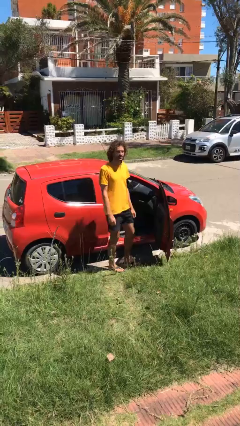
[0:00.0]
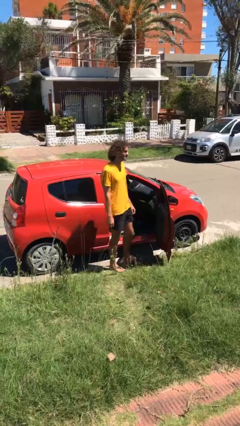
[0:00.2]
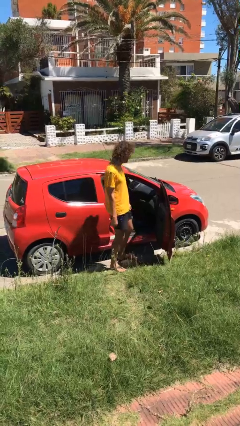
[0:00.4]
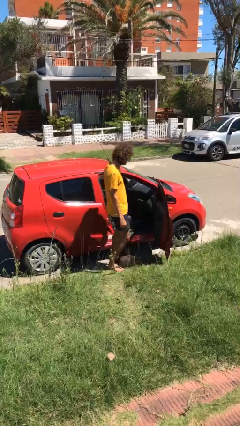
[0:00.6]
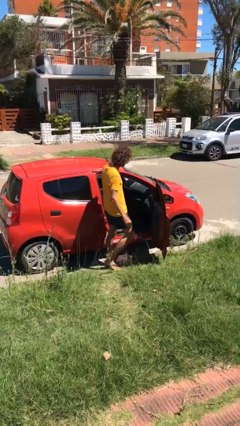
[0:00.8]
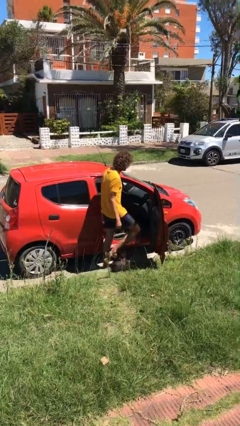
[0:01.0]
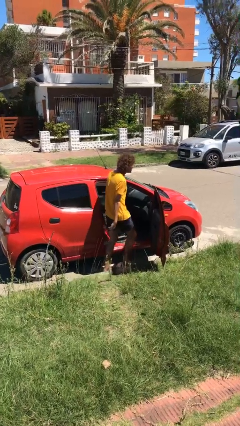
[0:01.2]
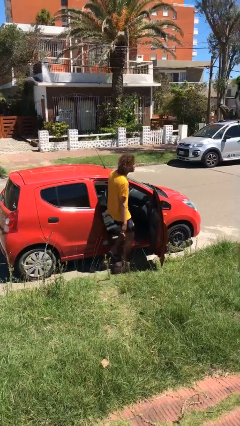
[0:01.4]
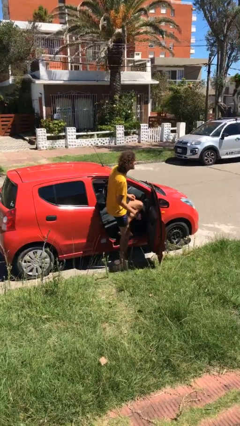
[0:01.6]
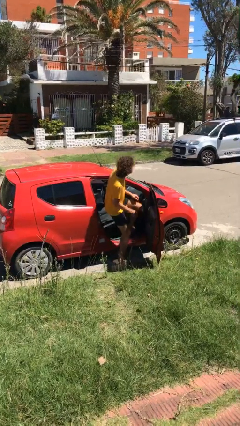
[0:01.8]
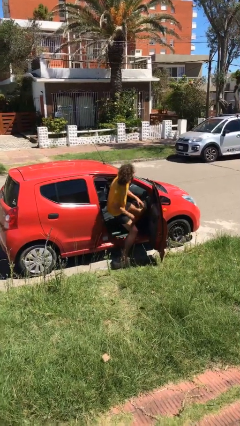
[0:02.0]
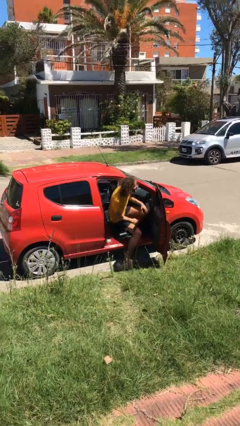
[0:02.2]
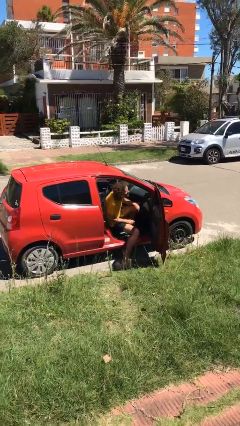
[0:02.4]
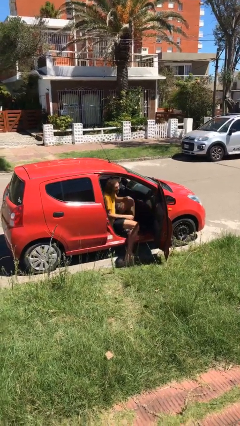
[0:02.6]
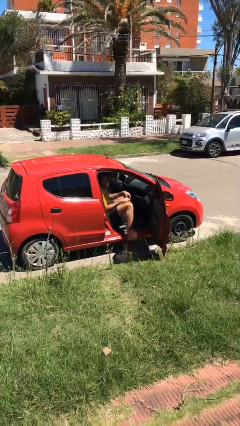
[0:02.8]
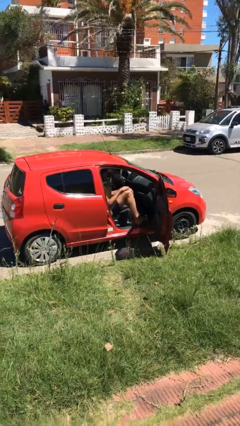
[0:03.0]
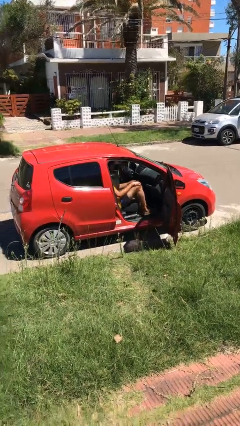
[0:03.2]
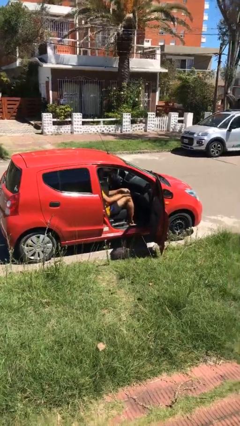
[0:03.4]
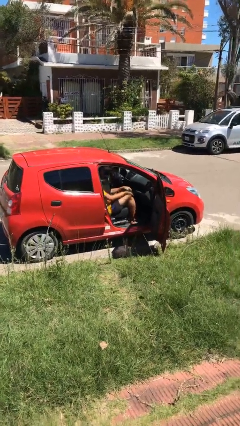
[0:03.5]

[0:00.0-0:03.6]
person enters car

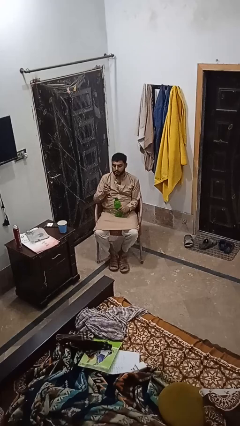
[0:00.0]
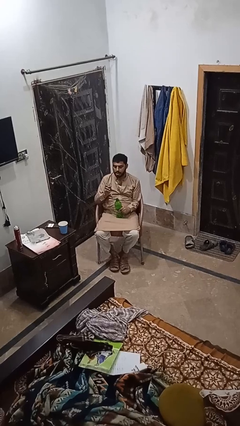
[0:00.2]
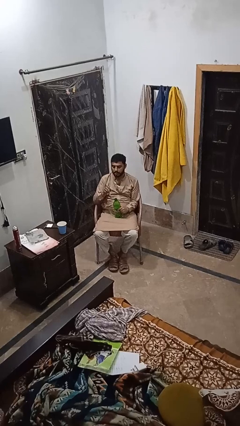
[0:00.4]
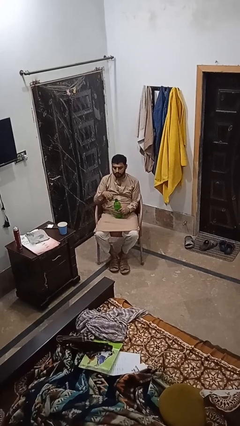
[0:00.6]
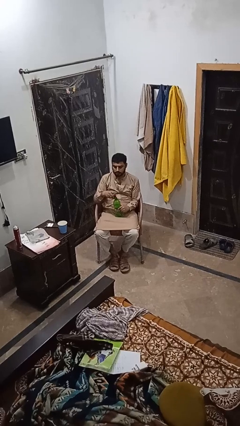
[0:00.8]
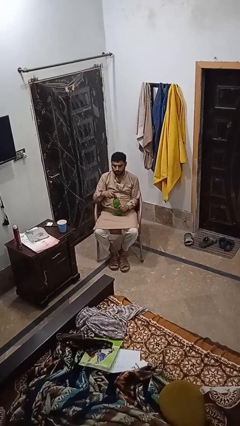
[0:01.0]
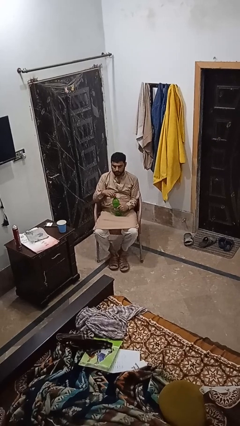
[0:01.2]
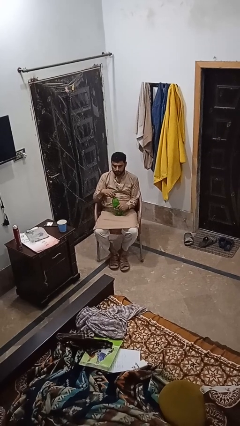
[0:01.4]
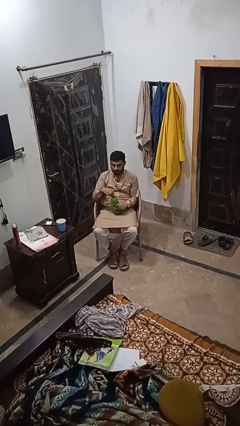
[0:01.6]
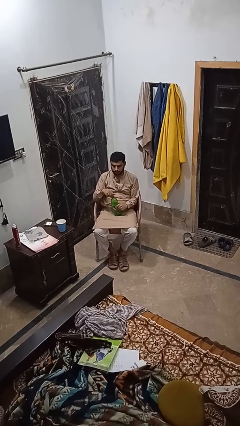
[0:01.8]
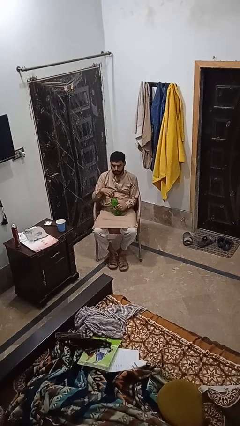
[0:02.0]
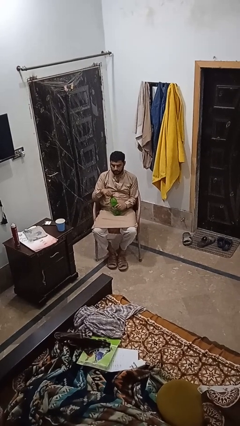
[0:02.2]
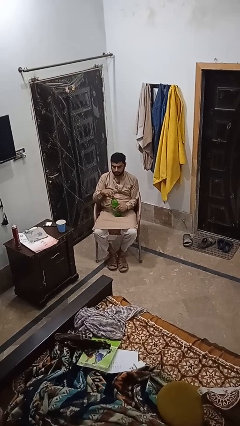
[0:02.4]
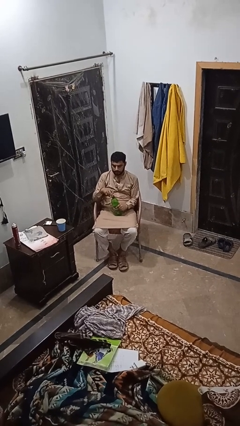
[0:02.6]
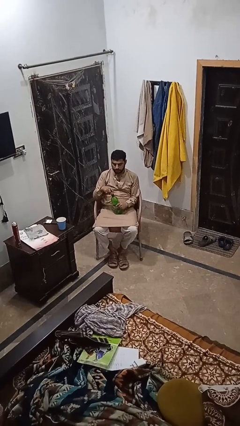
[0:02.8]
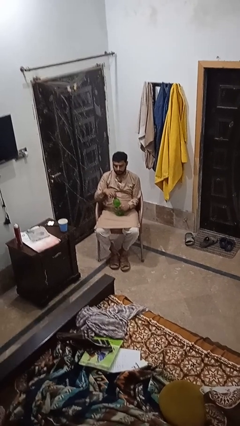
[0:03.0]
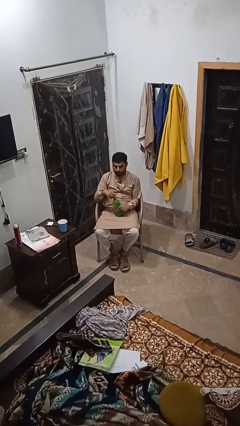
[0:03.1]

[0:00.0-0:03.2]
person screws lid to bottle

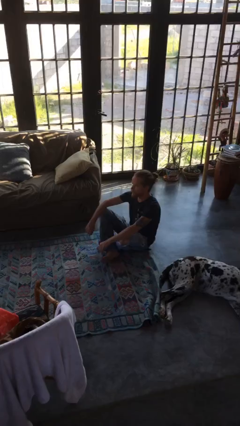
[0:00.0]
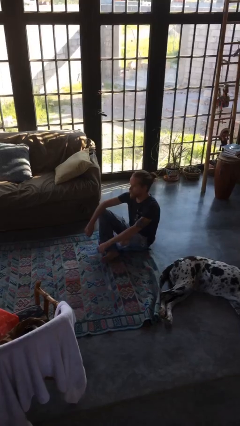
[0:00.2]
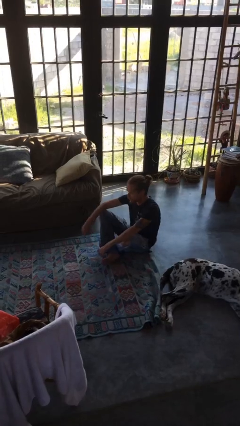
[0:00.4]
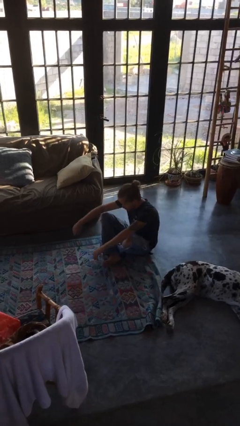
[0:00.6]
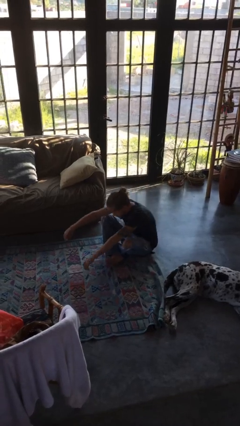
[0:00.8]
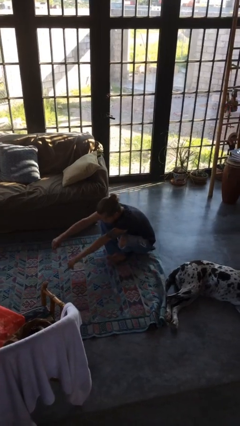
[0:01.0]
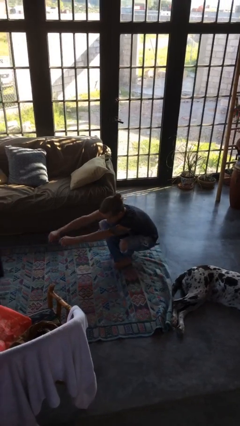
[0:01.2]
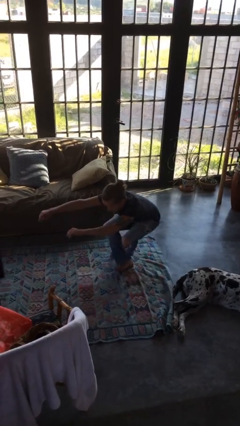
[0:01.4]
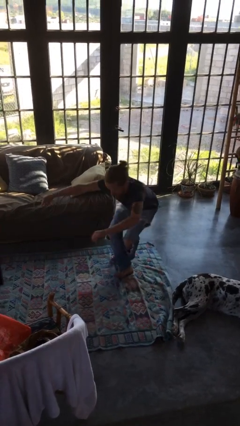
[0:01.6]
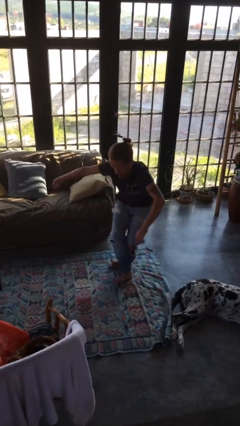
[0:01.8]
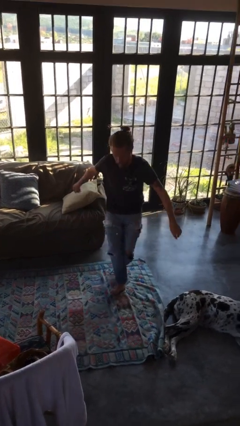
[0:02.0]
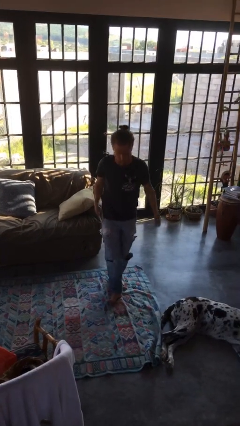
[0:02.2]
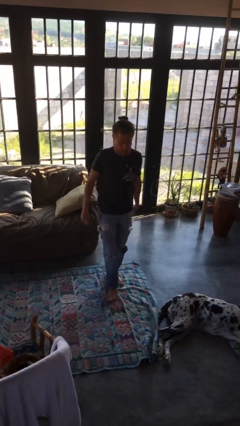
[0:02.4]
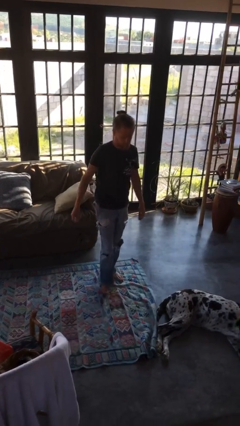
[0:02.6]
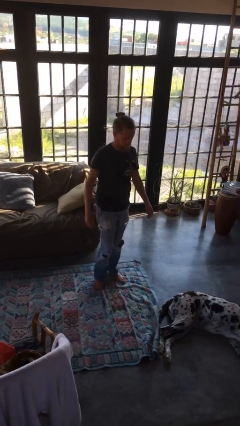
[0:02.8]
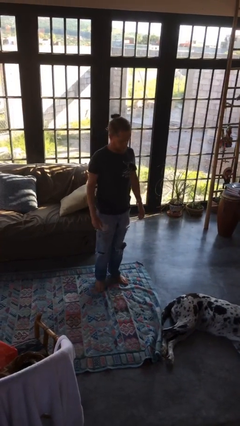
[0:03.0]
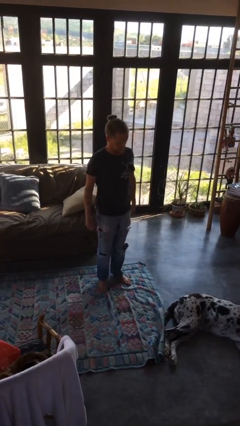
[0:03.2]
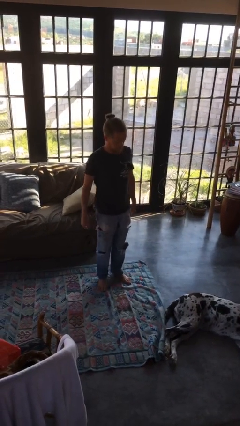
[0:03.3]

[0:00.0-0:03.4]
person stands up from floor

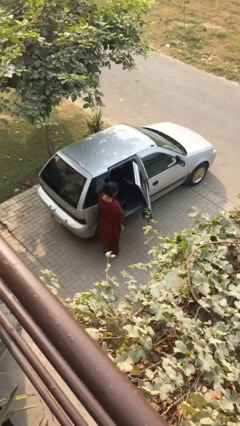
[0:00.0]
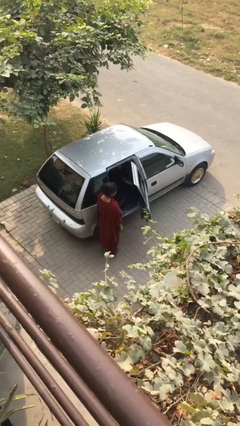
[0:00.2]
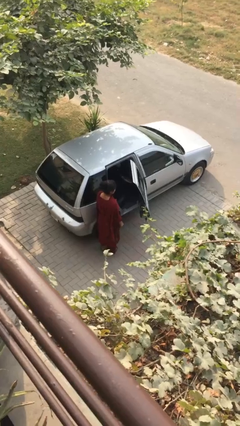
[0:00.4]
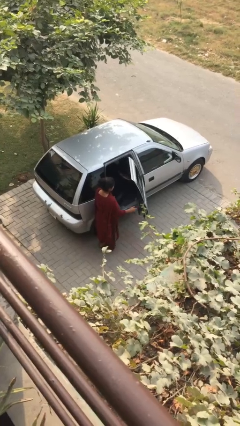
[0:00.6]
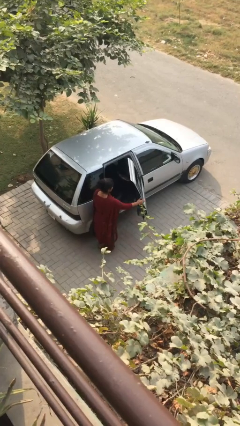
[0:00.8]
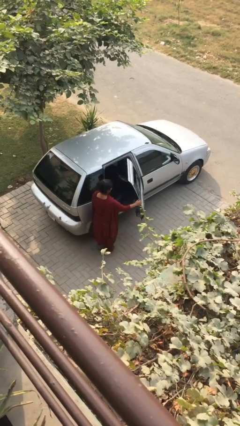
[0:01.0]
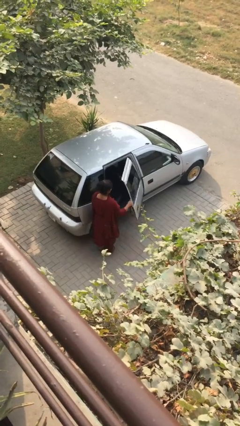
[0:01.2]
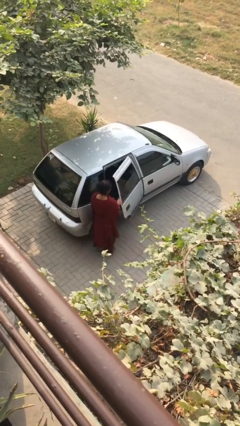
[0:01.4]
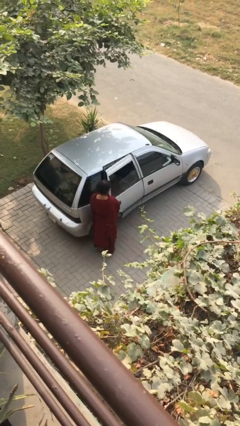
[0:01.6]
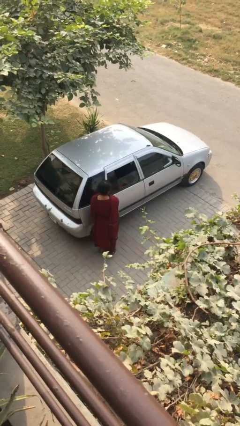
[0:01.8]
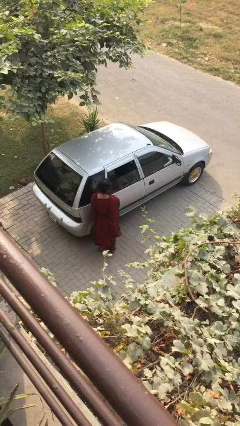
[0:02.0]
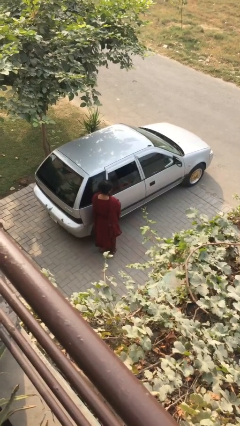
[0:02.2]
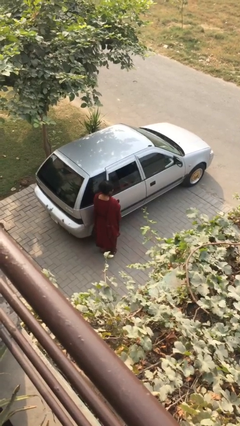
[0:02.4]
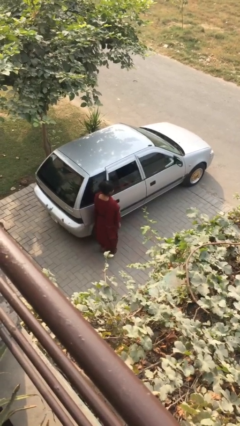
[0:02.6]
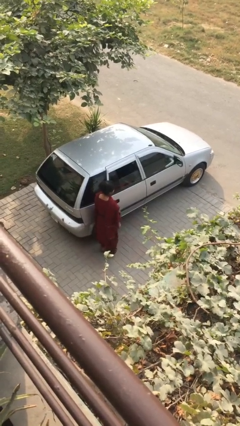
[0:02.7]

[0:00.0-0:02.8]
person closes car door

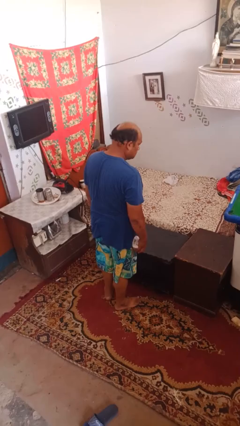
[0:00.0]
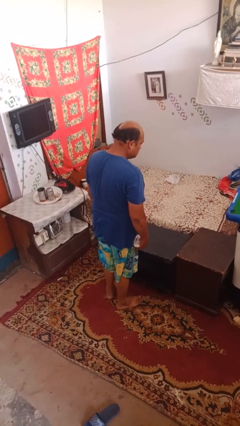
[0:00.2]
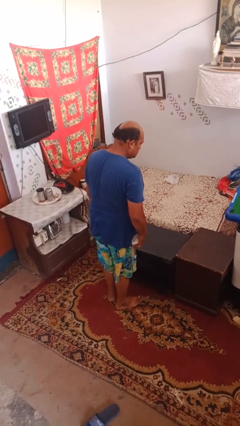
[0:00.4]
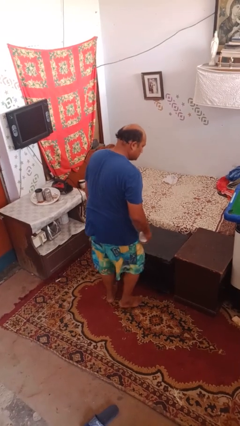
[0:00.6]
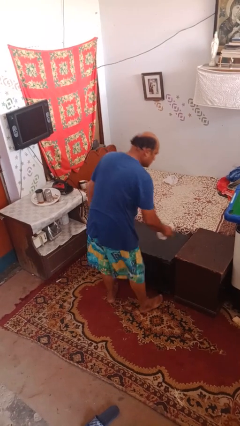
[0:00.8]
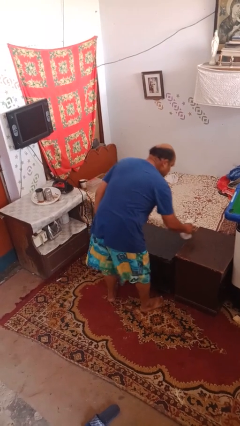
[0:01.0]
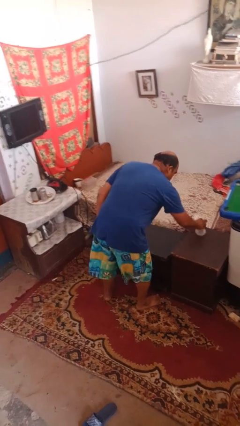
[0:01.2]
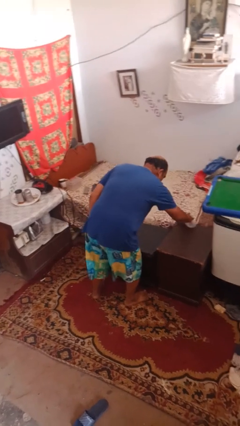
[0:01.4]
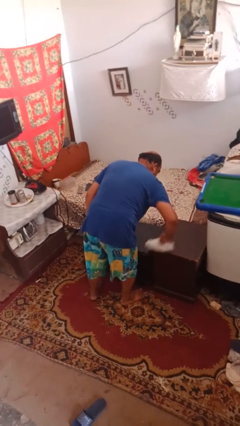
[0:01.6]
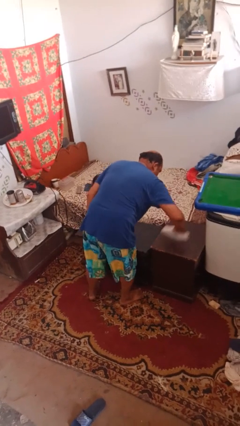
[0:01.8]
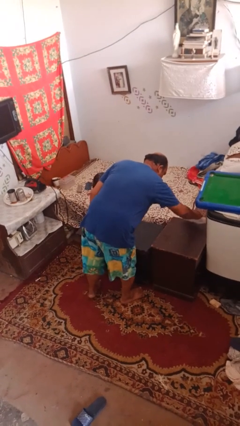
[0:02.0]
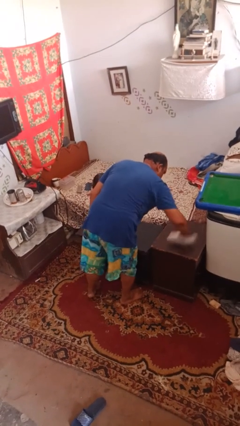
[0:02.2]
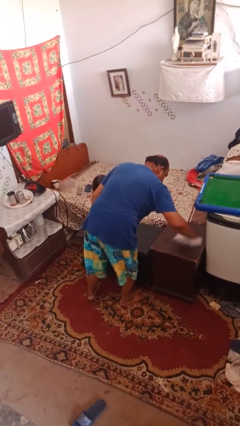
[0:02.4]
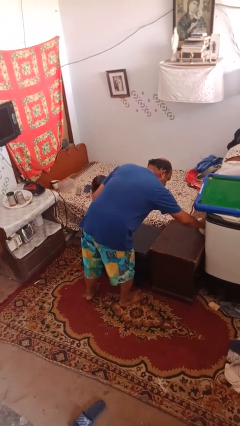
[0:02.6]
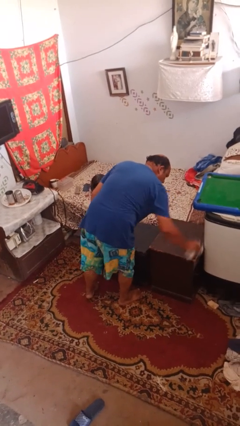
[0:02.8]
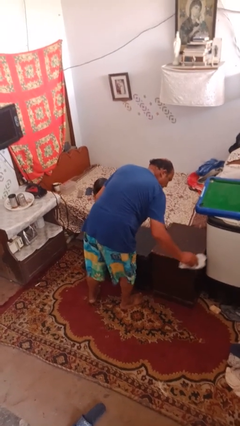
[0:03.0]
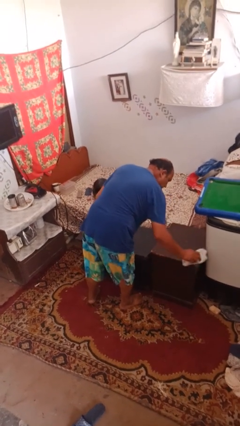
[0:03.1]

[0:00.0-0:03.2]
person dusts furniture

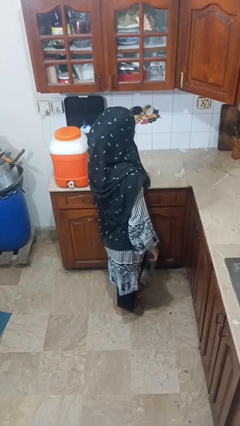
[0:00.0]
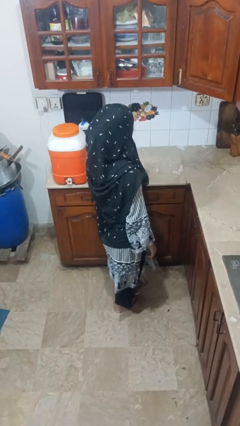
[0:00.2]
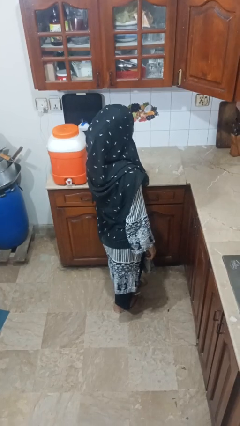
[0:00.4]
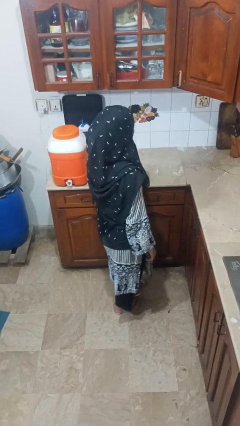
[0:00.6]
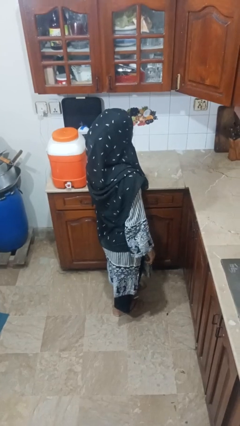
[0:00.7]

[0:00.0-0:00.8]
person closes cabinet

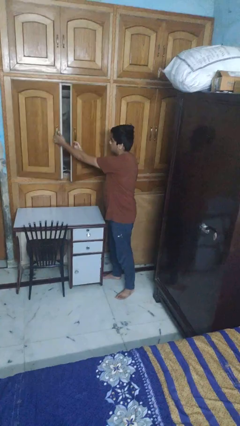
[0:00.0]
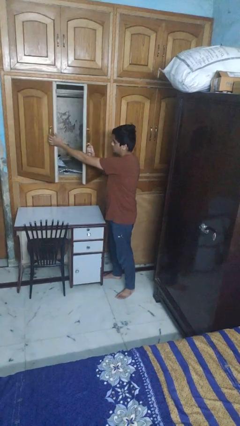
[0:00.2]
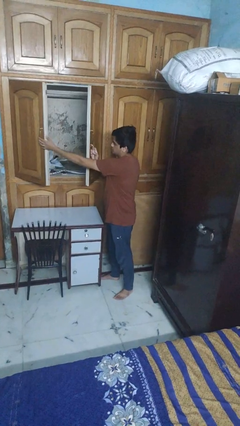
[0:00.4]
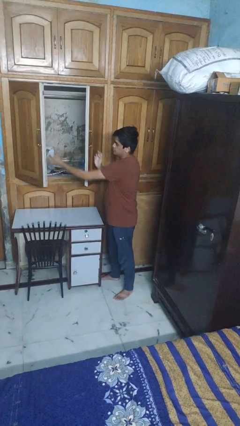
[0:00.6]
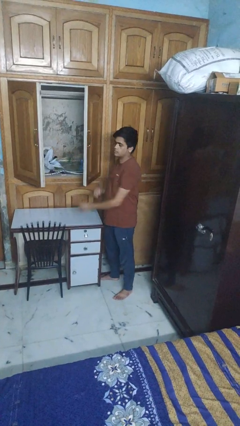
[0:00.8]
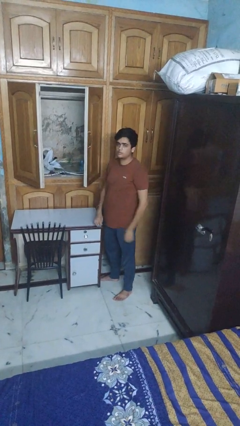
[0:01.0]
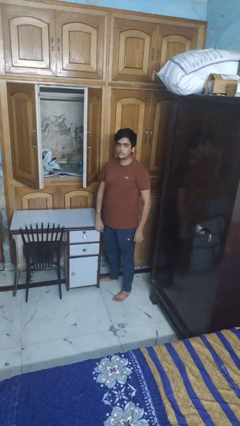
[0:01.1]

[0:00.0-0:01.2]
person opens closet door
